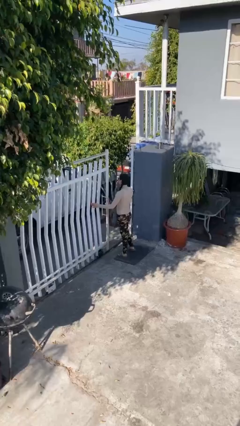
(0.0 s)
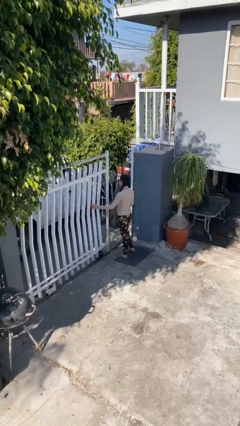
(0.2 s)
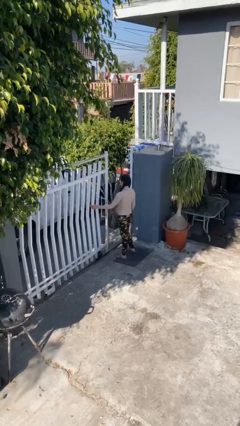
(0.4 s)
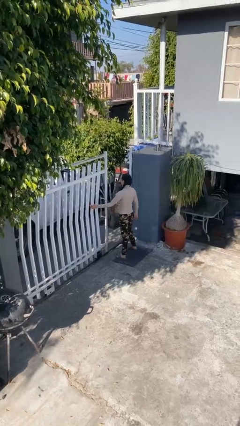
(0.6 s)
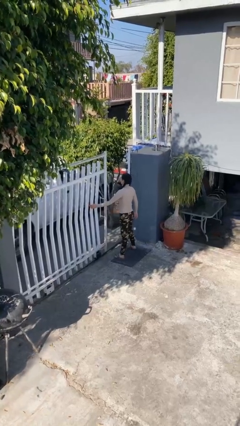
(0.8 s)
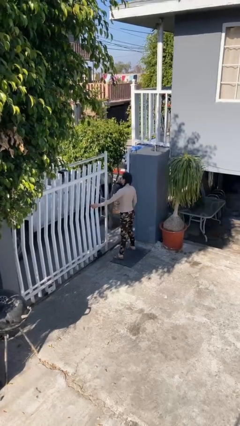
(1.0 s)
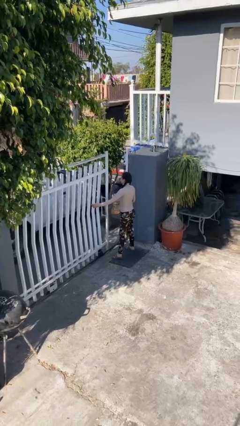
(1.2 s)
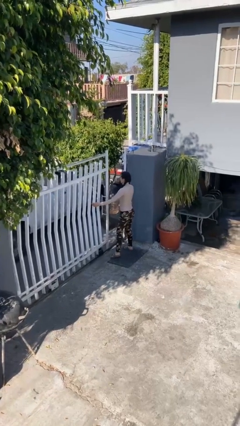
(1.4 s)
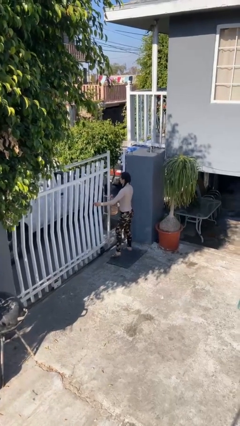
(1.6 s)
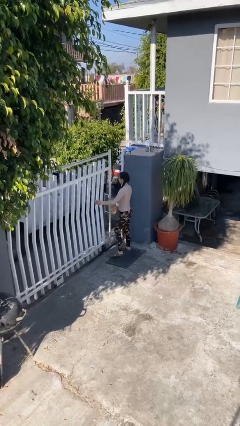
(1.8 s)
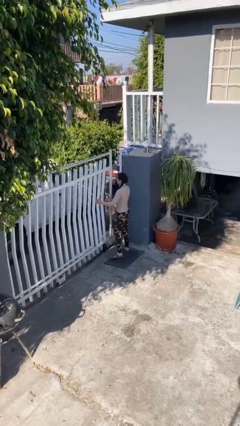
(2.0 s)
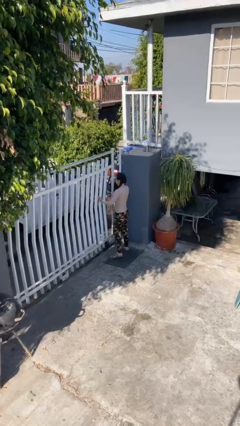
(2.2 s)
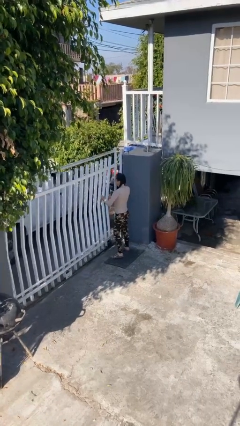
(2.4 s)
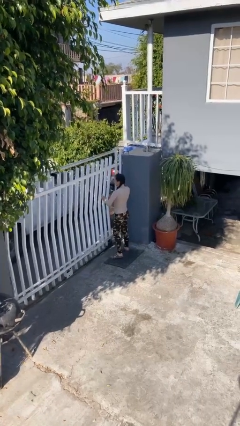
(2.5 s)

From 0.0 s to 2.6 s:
person closes facility door

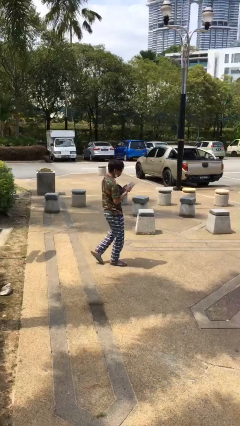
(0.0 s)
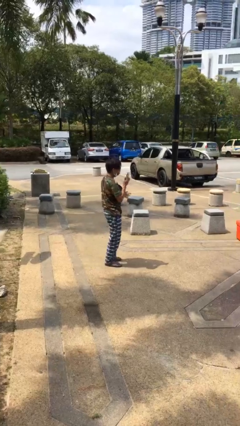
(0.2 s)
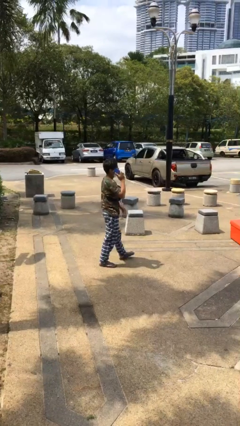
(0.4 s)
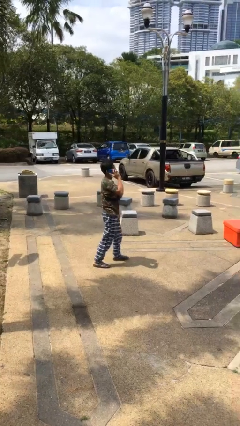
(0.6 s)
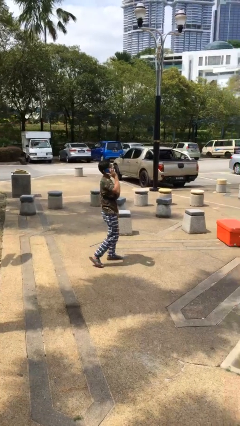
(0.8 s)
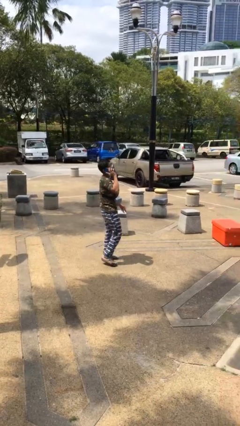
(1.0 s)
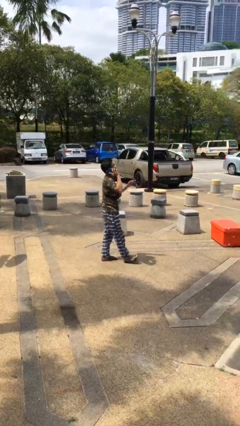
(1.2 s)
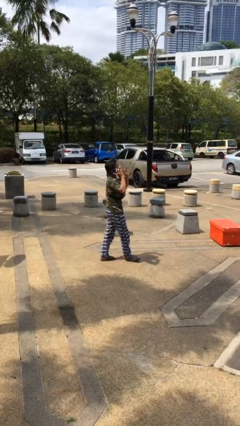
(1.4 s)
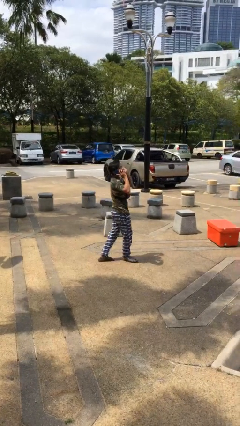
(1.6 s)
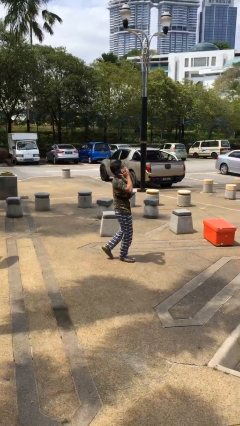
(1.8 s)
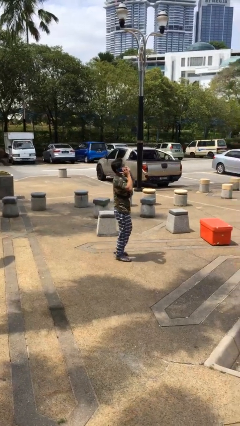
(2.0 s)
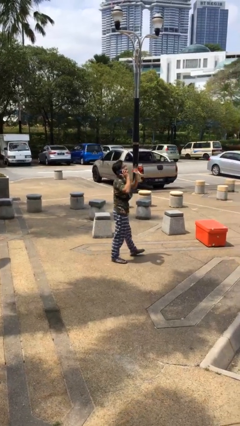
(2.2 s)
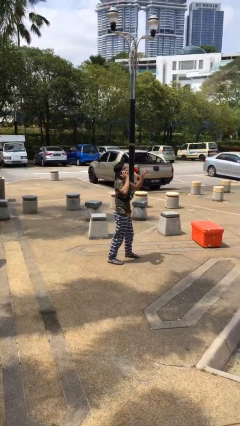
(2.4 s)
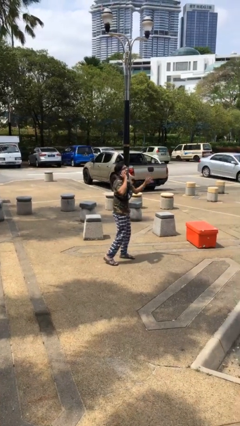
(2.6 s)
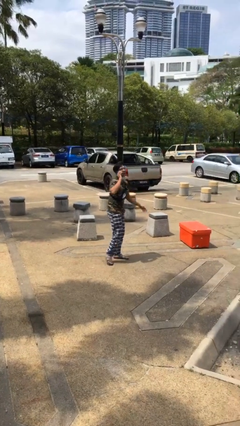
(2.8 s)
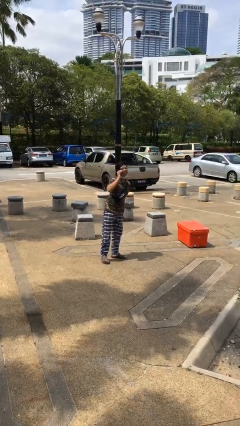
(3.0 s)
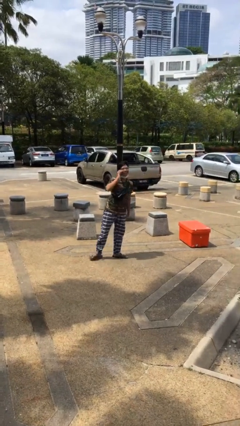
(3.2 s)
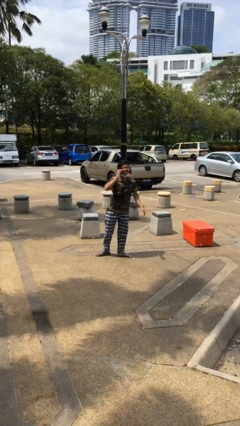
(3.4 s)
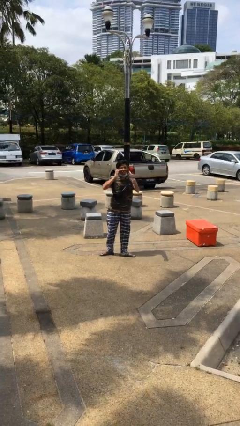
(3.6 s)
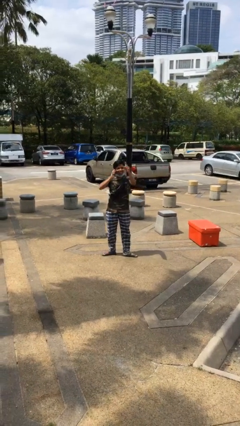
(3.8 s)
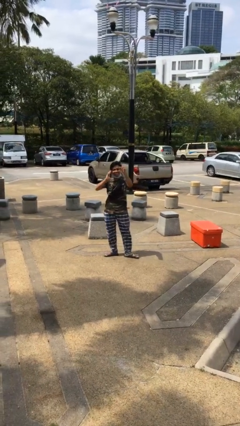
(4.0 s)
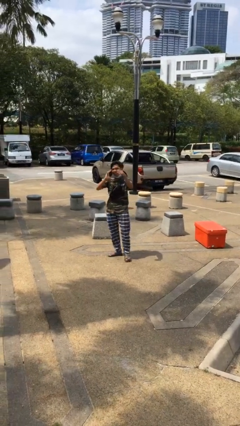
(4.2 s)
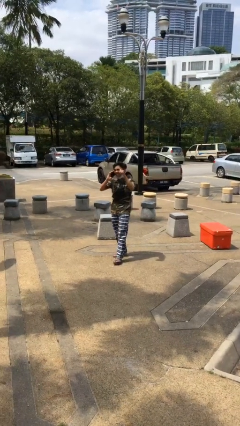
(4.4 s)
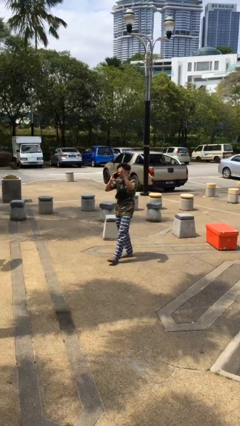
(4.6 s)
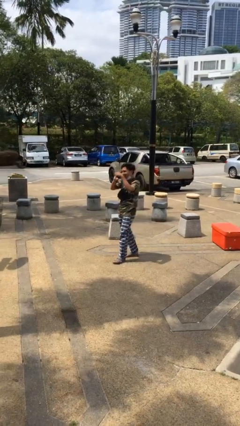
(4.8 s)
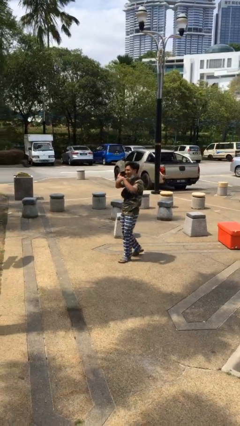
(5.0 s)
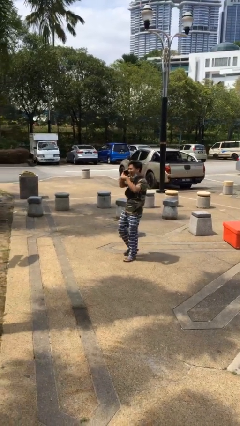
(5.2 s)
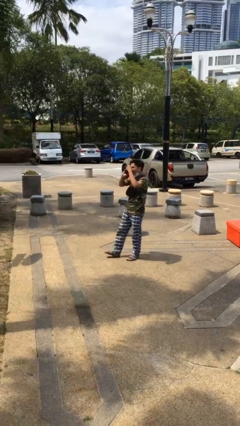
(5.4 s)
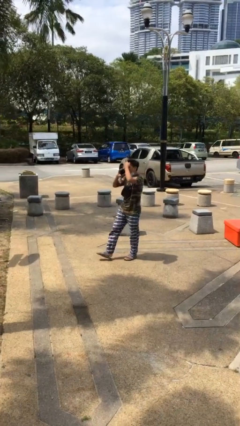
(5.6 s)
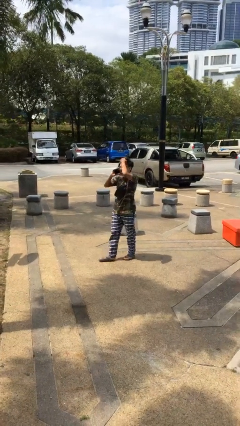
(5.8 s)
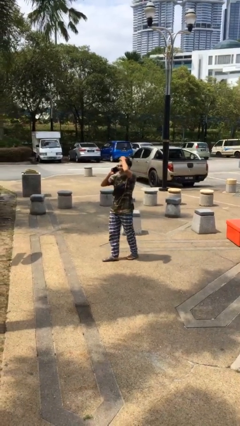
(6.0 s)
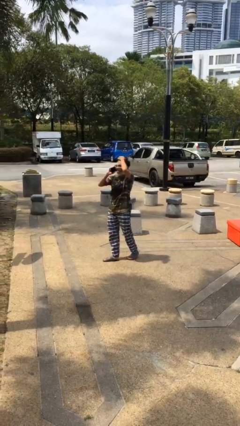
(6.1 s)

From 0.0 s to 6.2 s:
person talks on phone

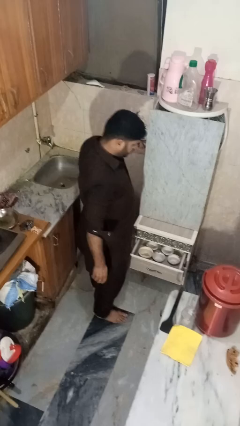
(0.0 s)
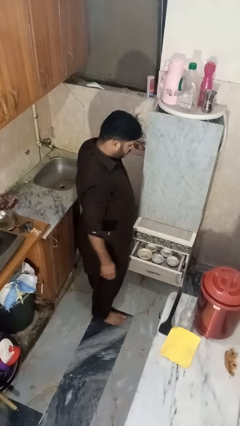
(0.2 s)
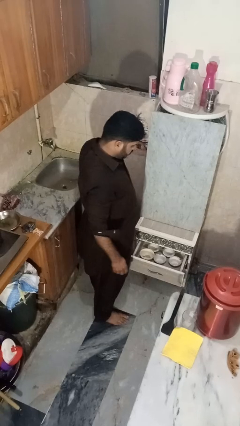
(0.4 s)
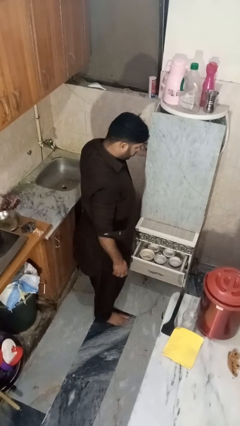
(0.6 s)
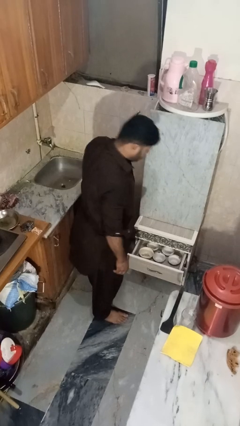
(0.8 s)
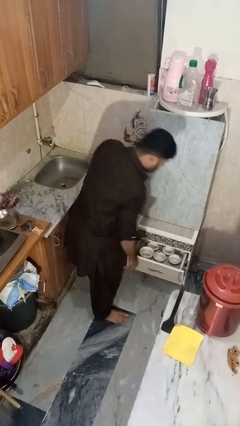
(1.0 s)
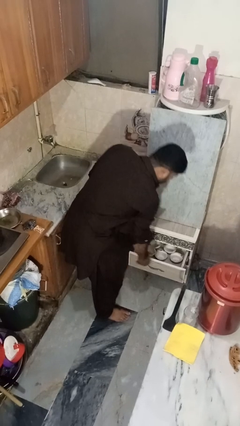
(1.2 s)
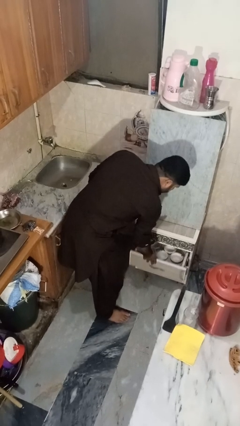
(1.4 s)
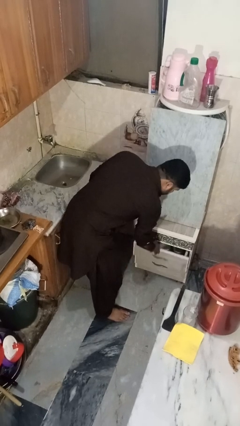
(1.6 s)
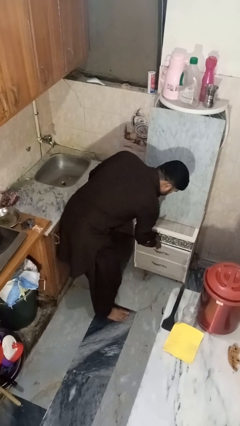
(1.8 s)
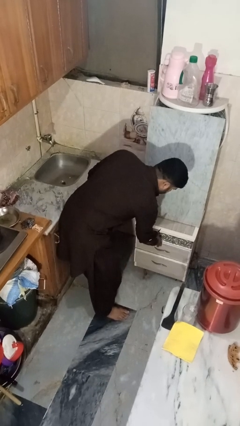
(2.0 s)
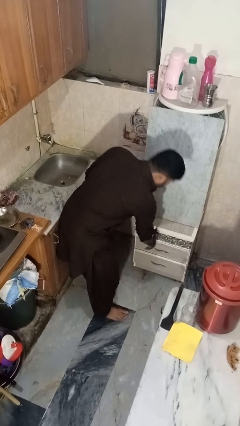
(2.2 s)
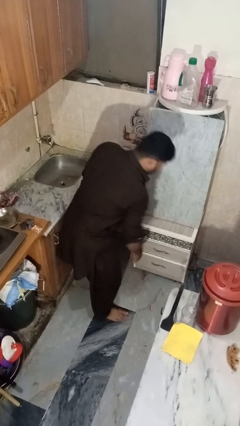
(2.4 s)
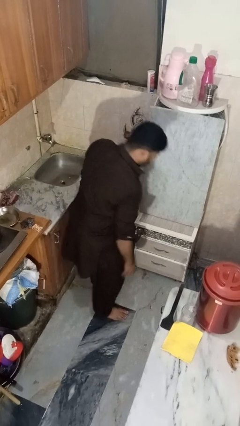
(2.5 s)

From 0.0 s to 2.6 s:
person closes kitchen drawer

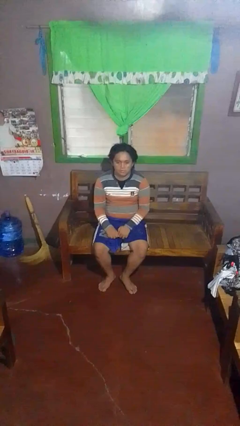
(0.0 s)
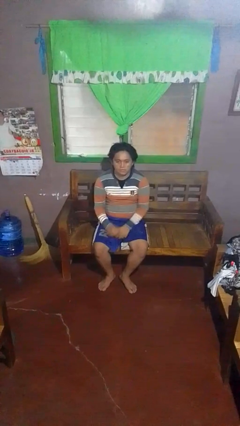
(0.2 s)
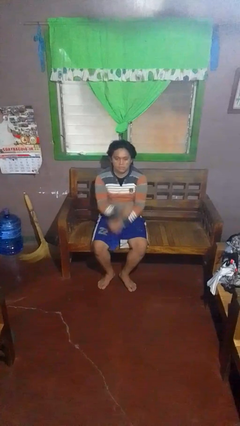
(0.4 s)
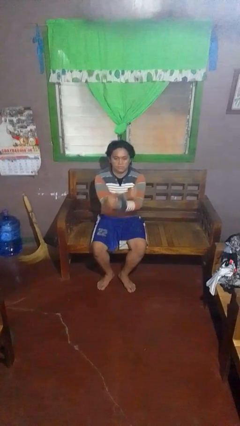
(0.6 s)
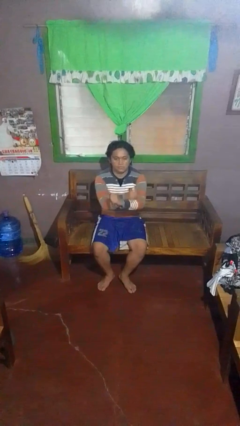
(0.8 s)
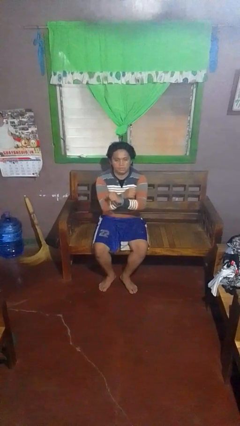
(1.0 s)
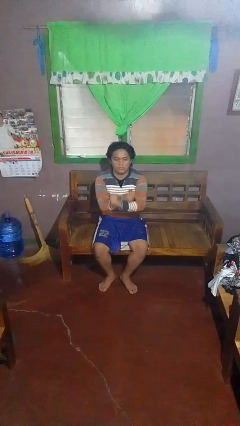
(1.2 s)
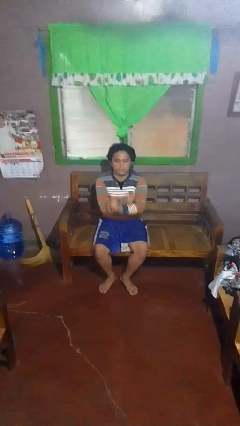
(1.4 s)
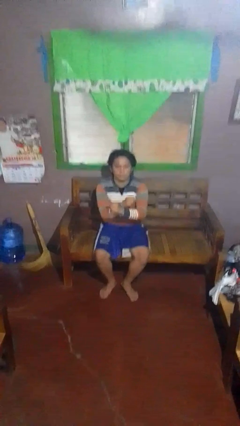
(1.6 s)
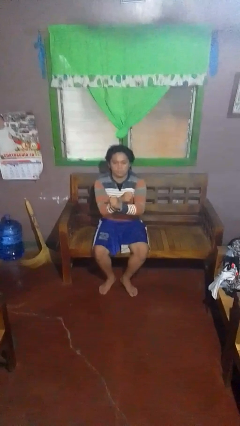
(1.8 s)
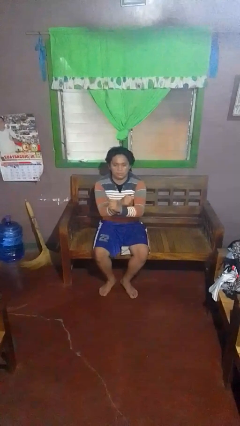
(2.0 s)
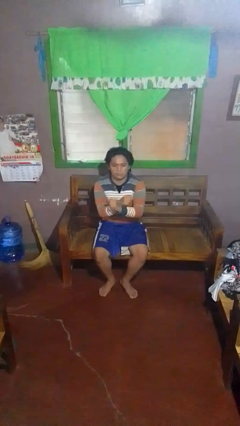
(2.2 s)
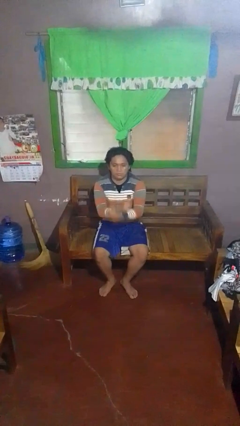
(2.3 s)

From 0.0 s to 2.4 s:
person gestures arms x

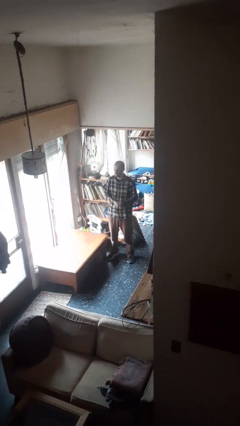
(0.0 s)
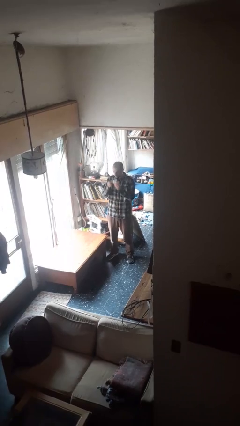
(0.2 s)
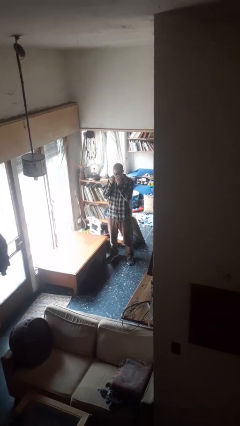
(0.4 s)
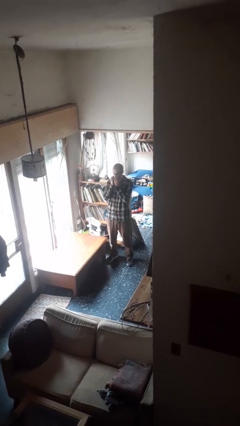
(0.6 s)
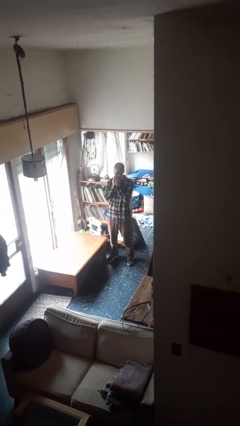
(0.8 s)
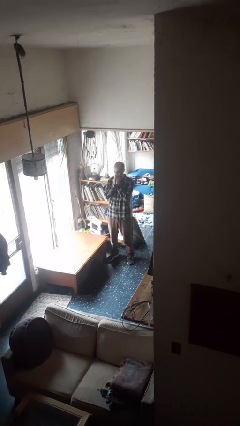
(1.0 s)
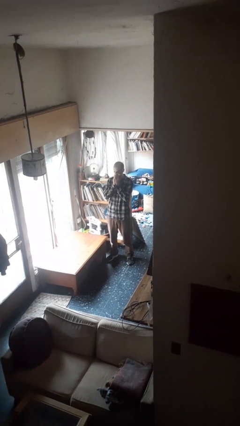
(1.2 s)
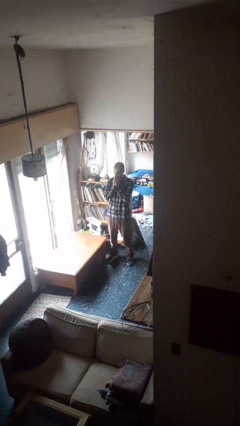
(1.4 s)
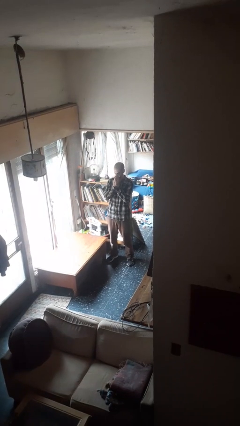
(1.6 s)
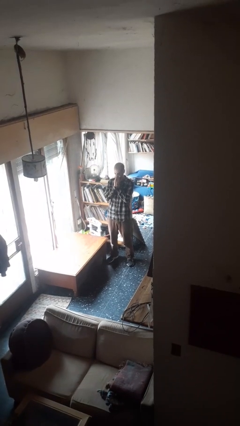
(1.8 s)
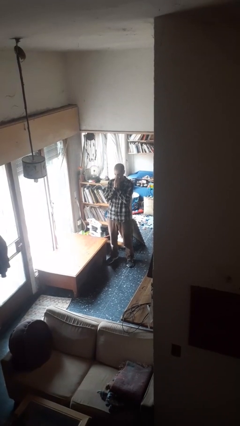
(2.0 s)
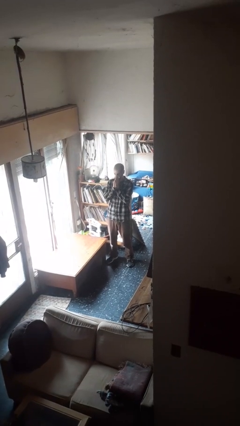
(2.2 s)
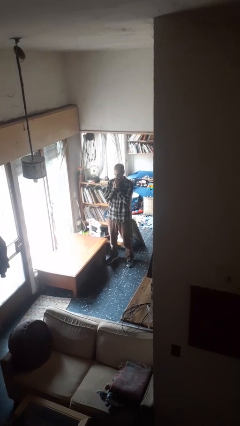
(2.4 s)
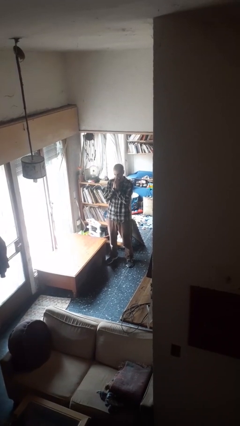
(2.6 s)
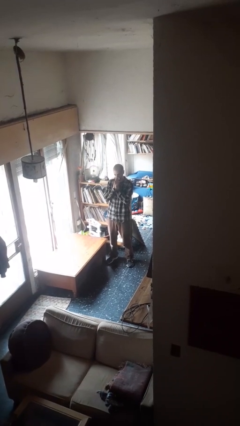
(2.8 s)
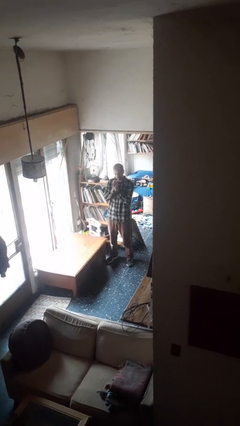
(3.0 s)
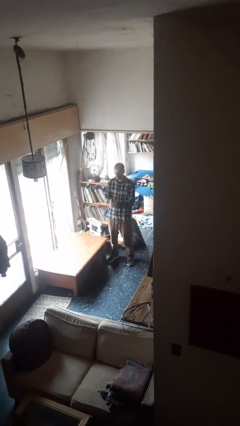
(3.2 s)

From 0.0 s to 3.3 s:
person blows nose
